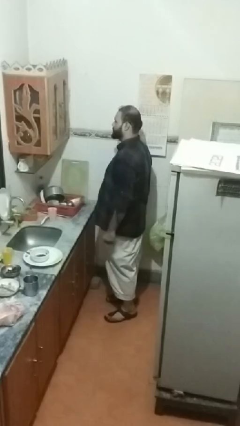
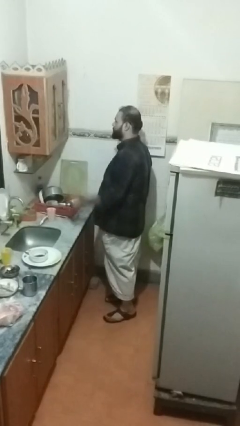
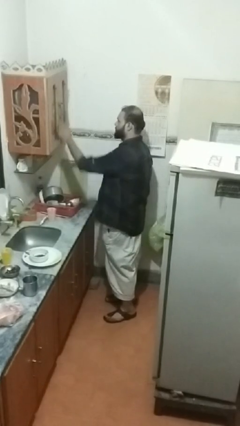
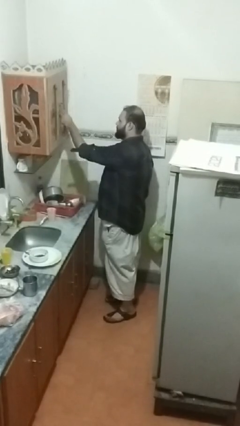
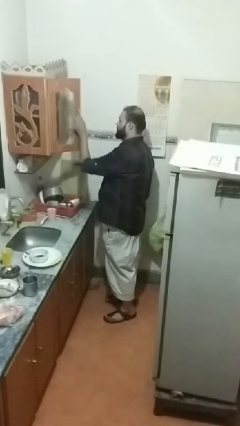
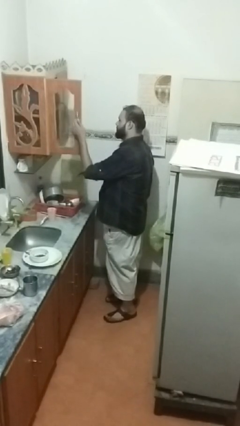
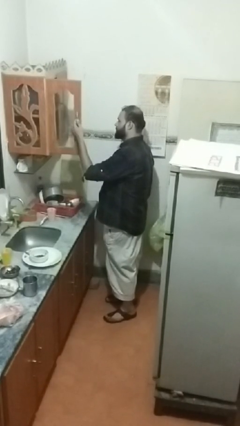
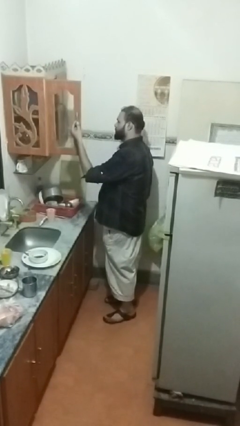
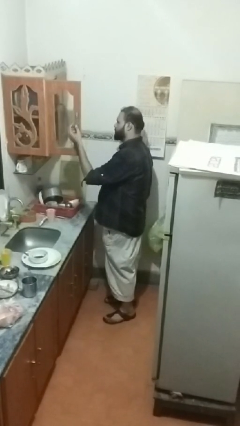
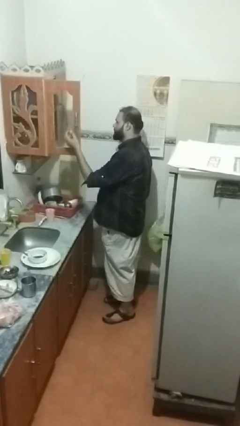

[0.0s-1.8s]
person opens cabinet

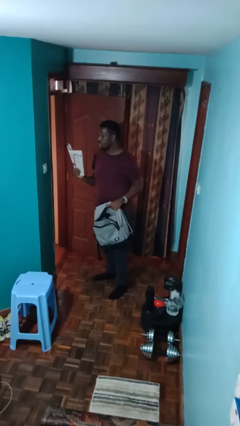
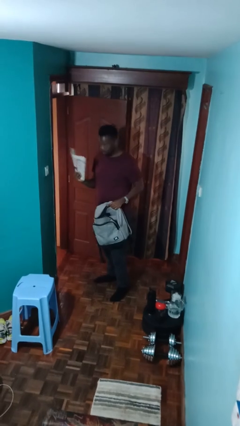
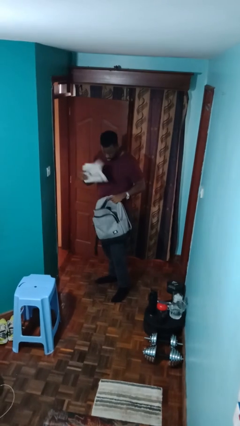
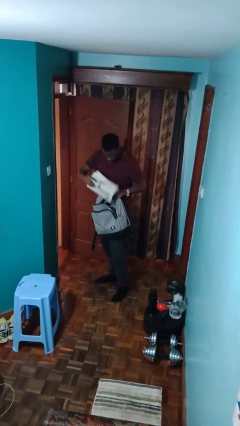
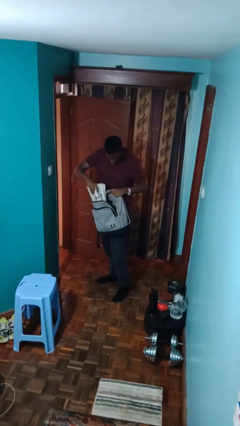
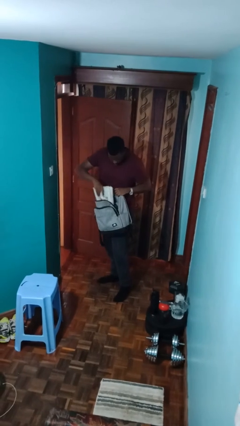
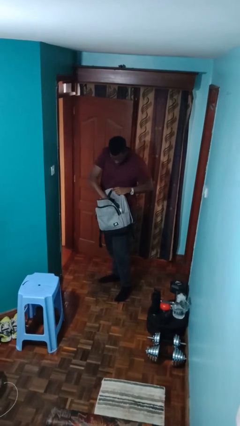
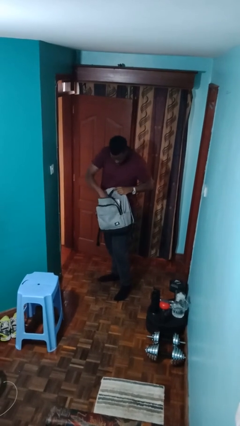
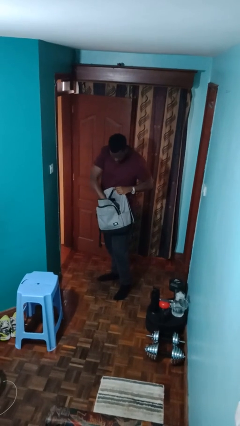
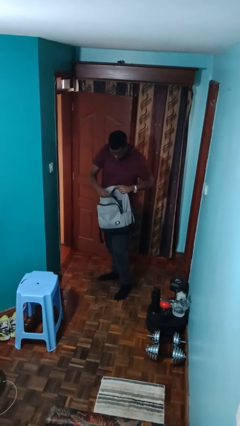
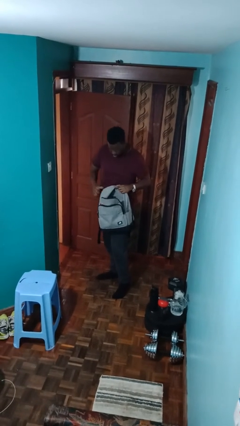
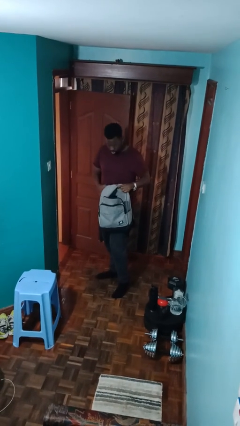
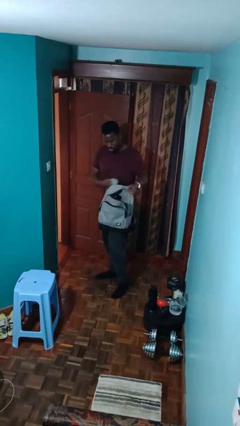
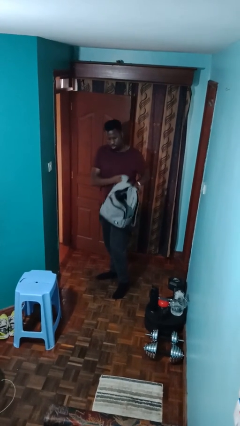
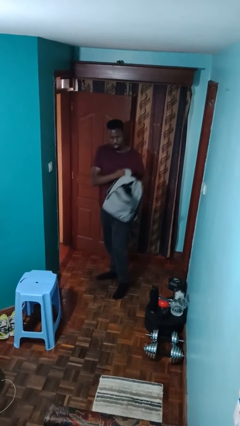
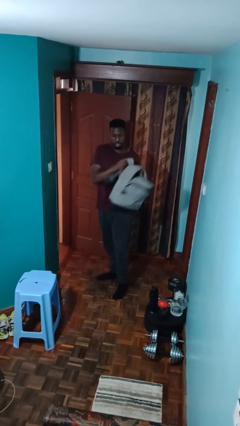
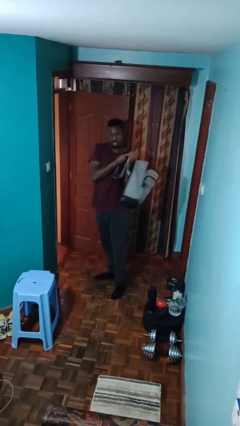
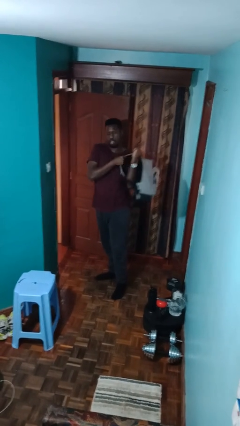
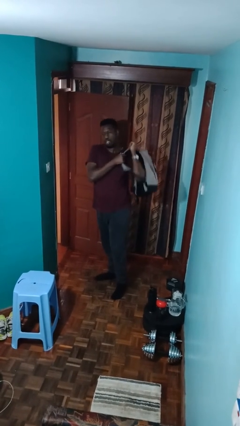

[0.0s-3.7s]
person puts object into backpack

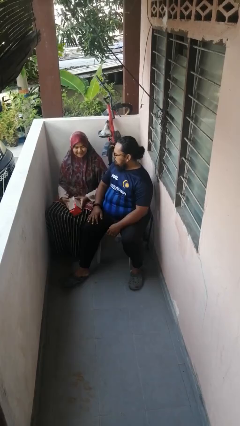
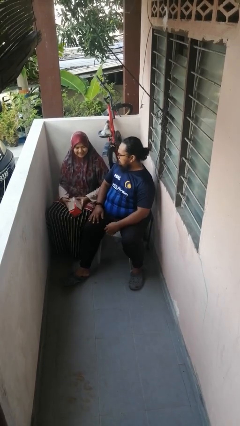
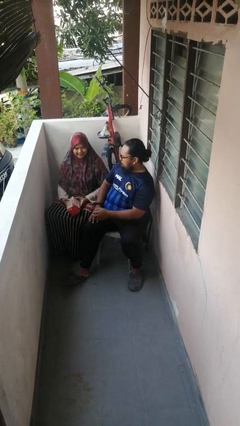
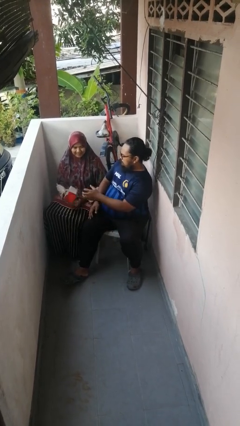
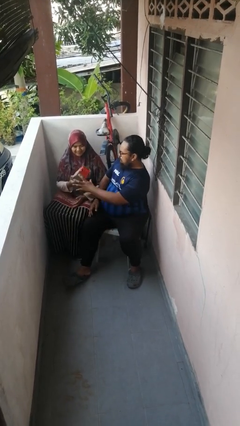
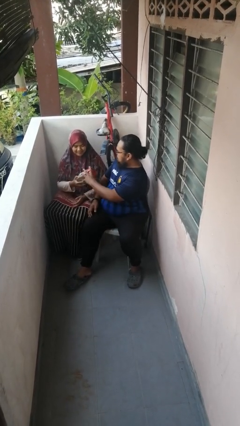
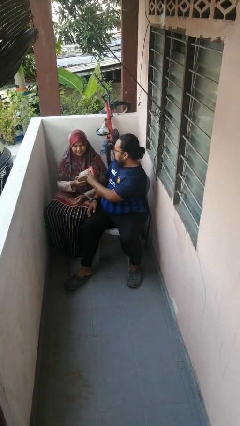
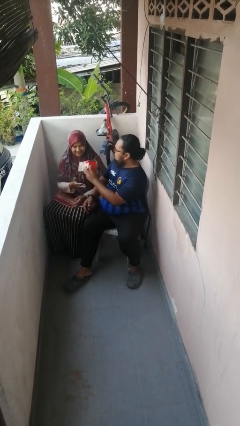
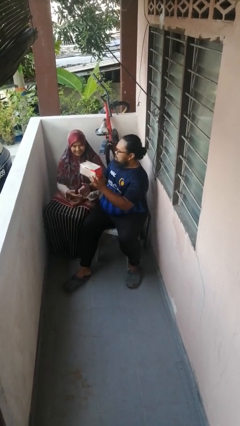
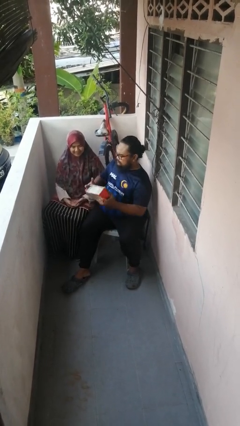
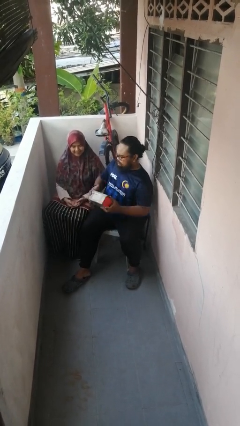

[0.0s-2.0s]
person transfers object to person

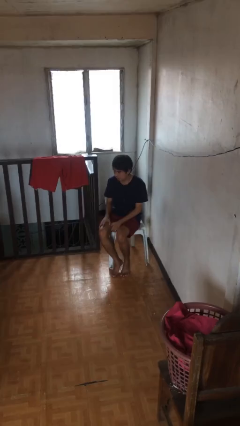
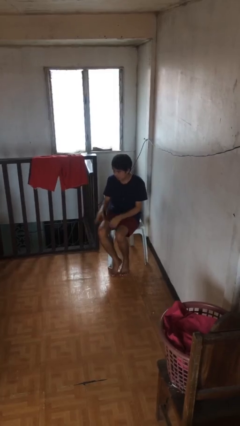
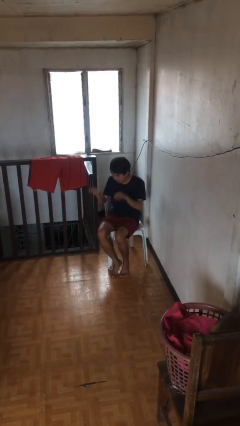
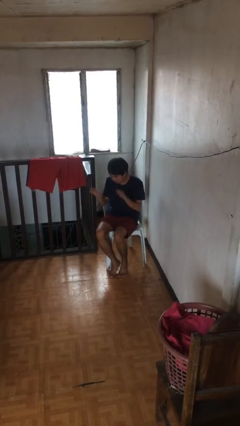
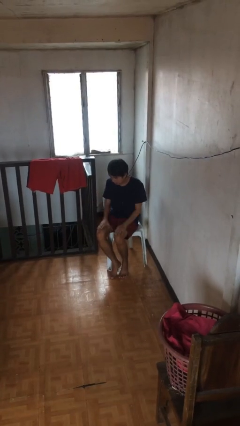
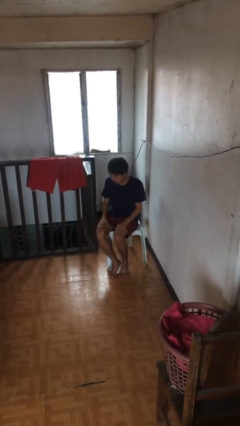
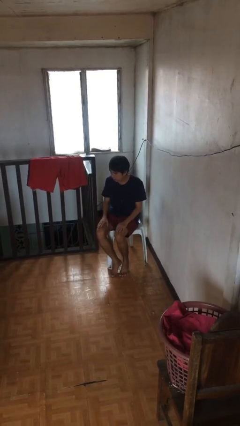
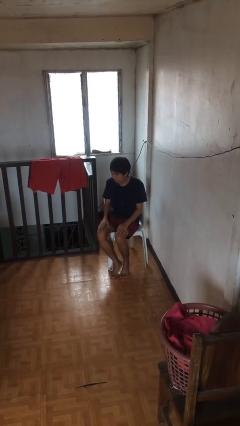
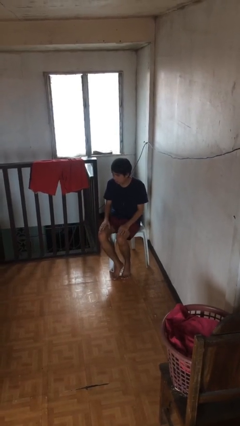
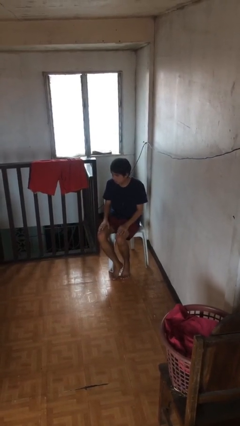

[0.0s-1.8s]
person slaps hands on thighs

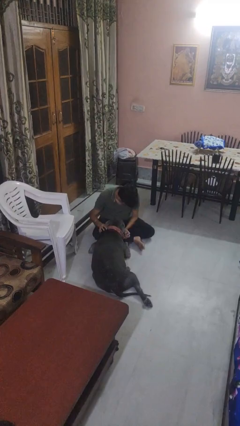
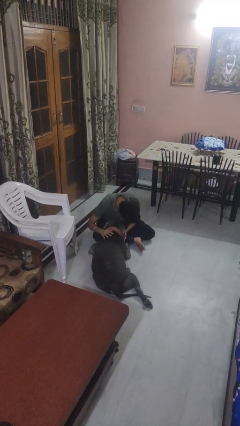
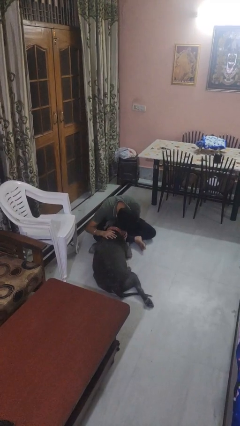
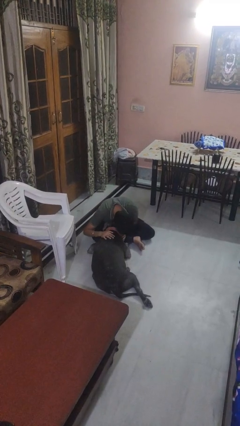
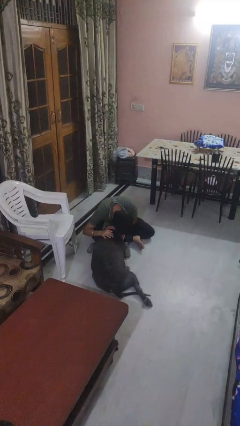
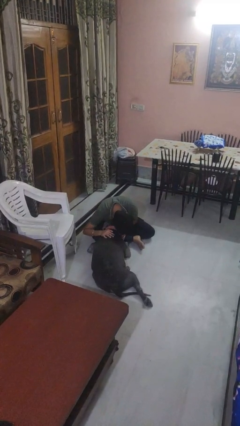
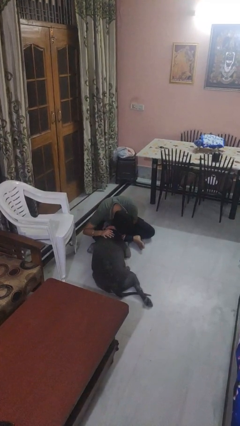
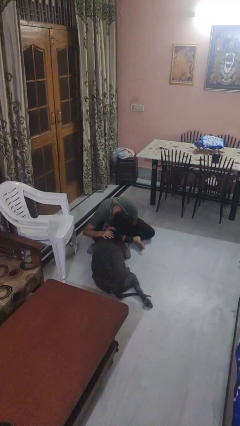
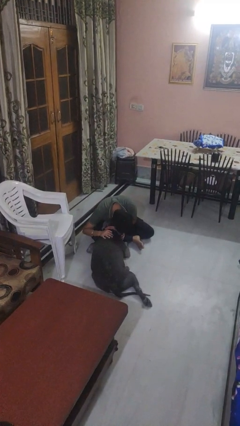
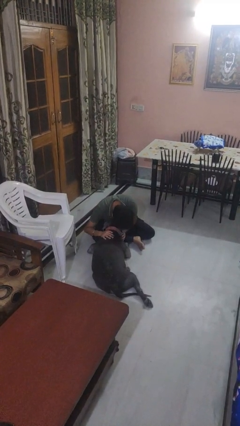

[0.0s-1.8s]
person hugs dog

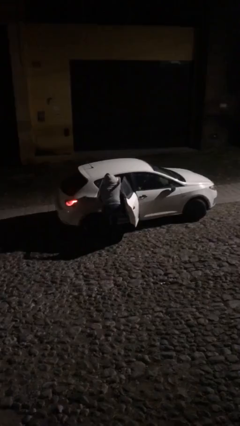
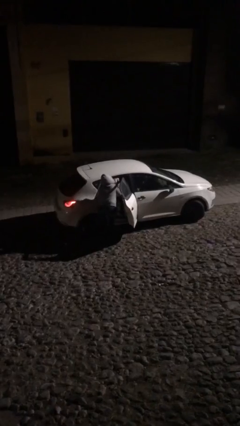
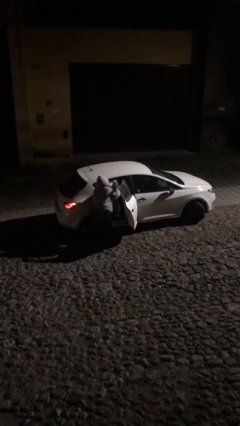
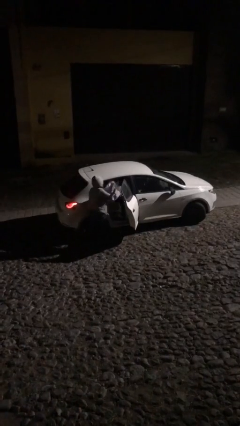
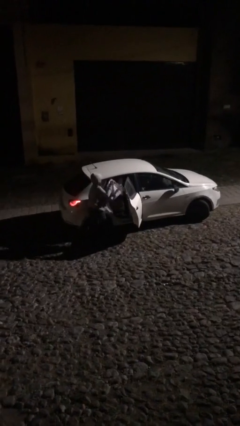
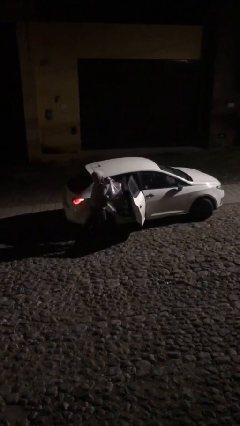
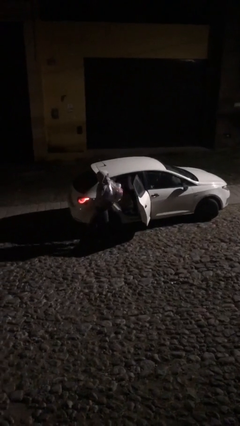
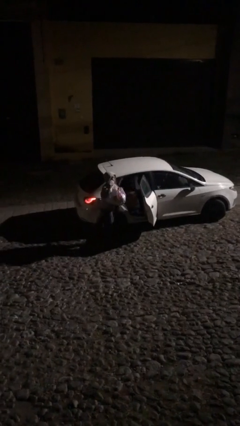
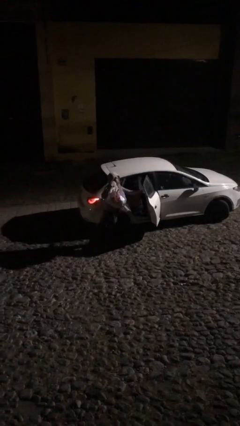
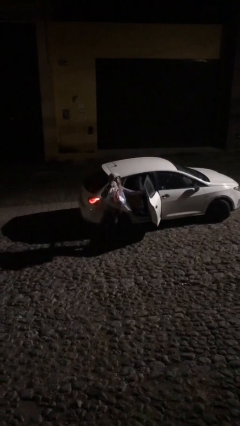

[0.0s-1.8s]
person unloads car

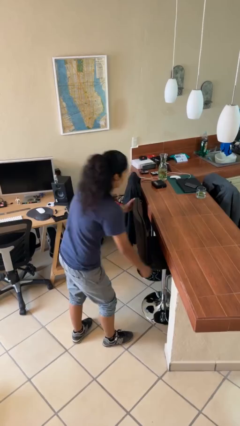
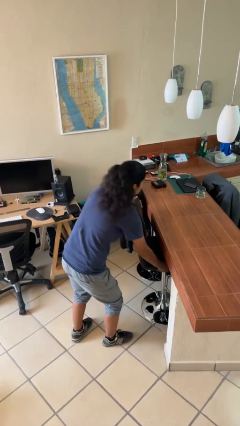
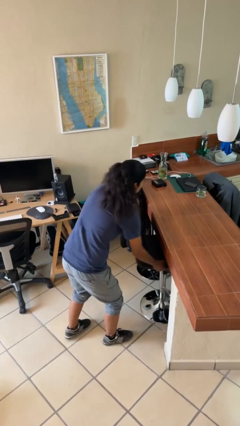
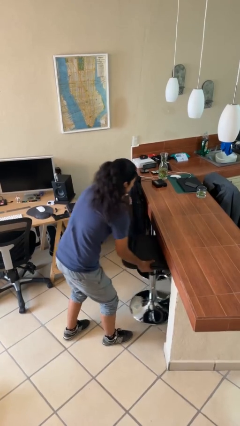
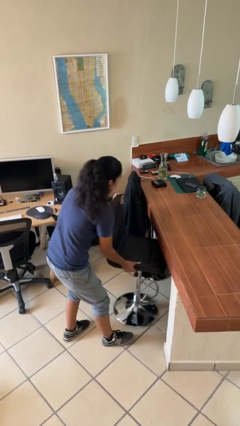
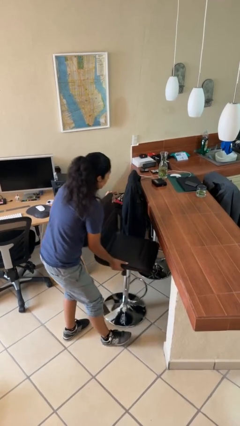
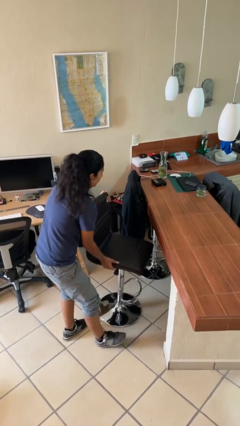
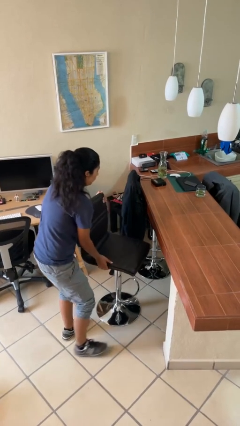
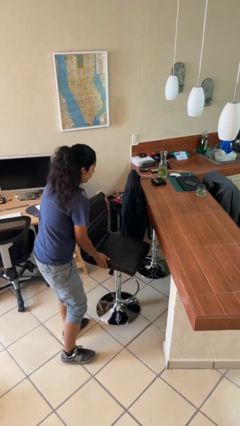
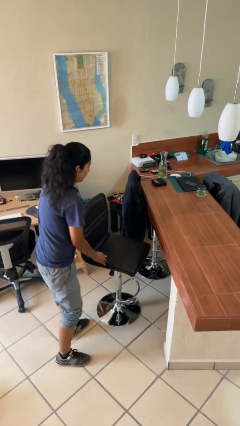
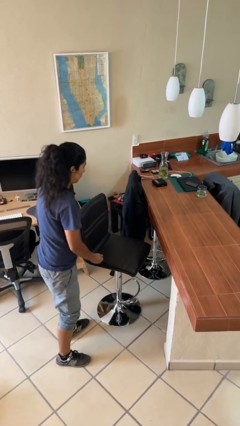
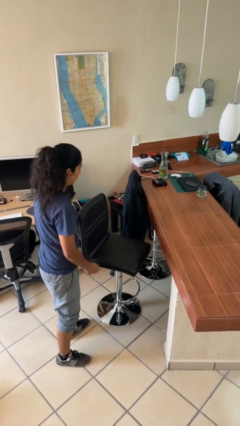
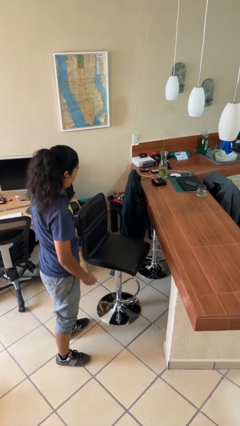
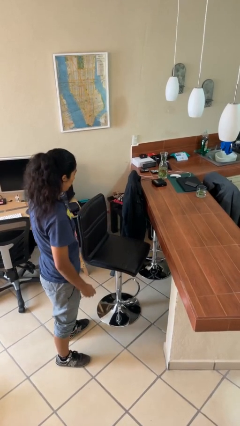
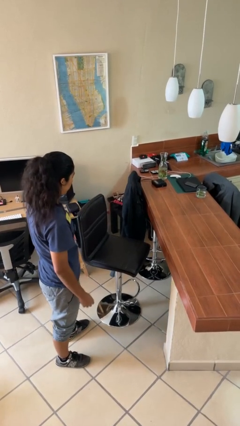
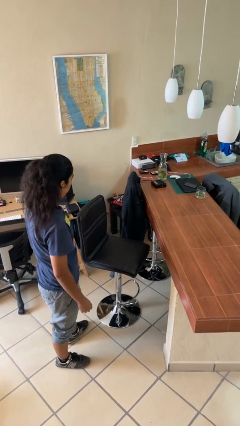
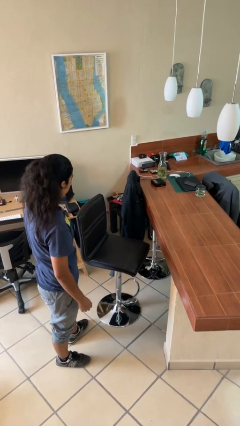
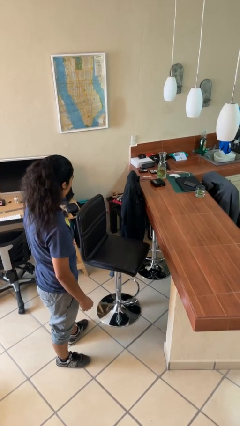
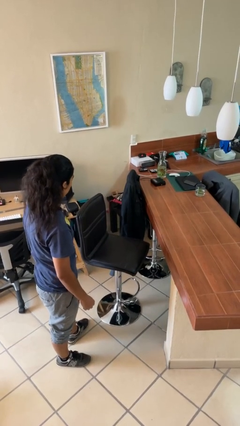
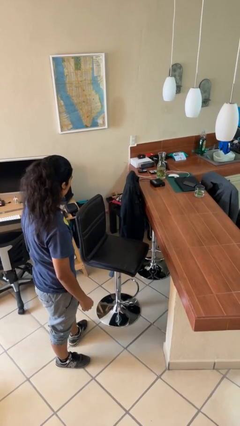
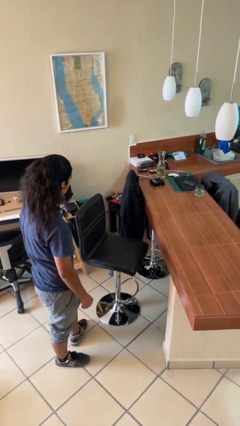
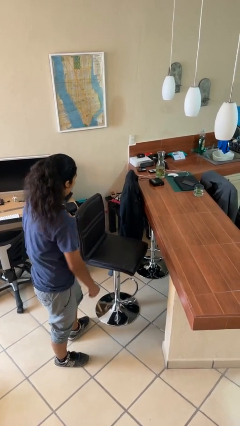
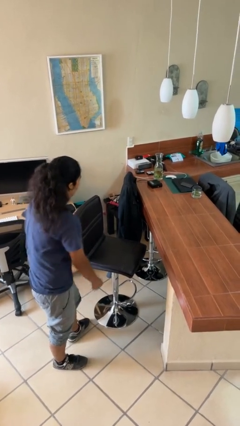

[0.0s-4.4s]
person pulls out chair
